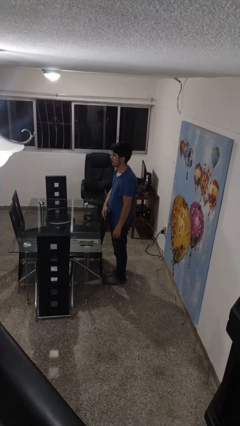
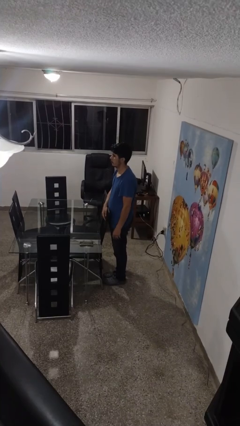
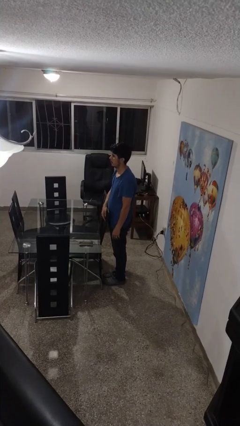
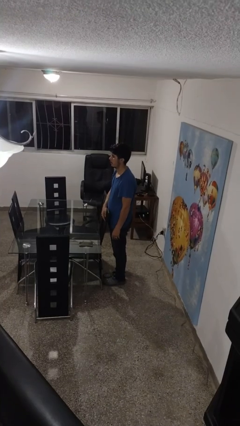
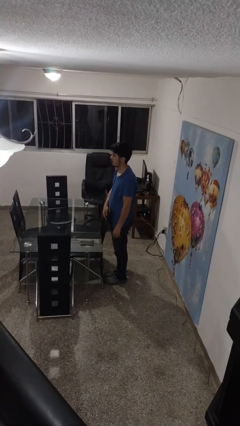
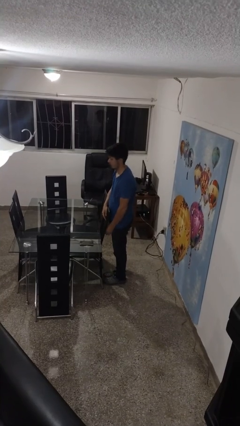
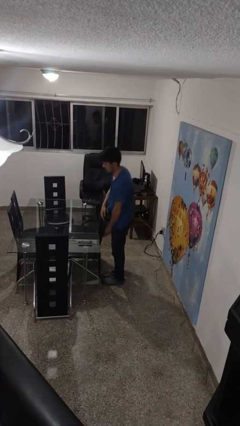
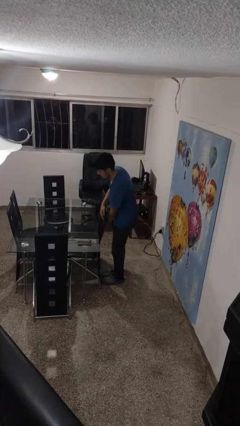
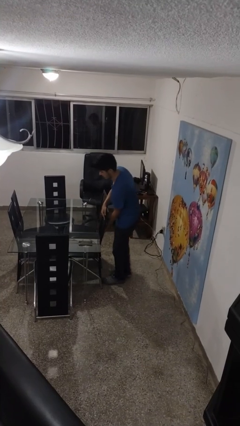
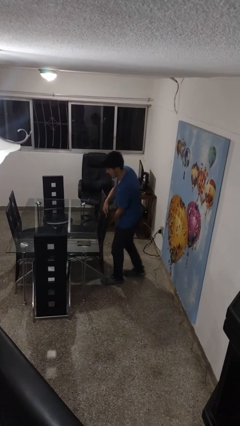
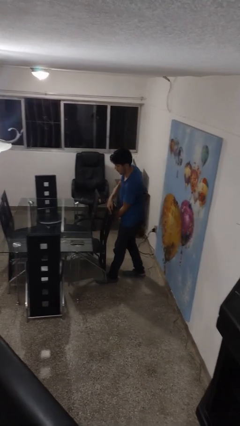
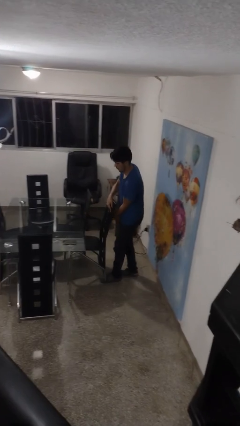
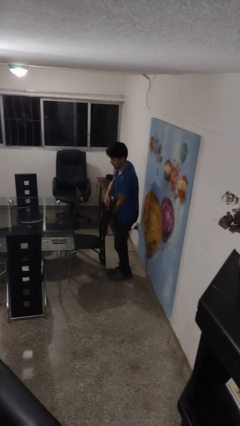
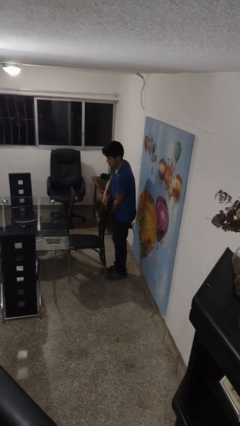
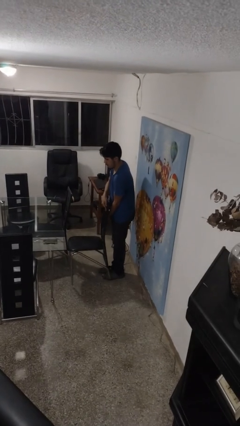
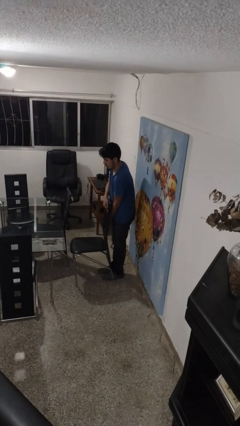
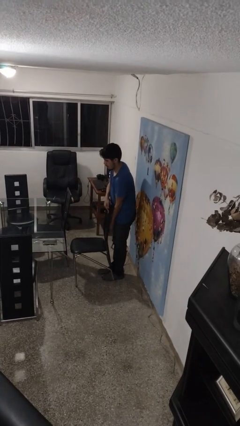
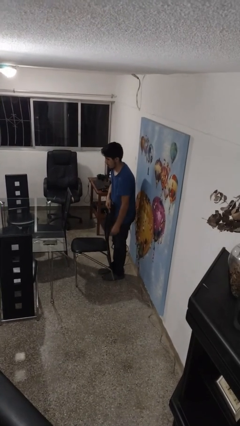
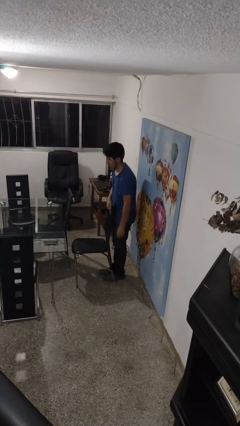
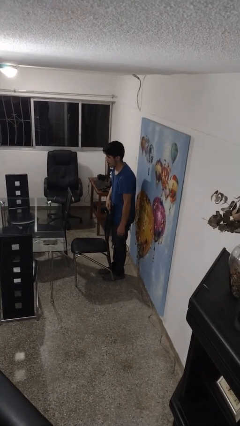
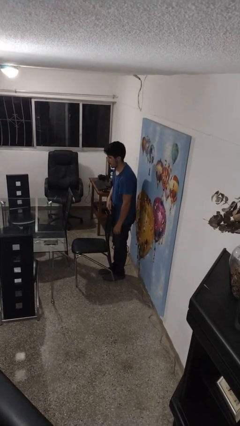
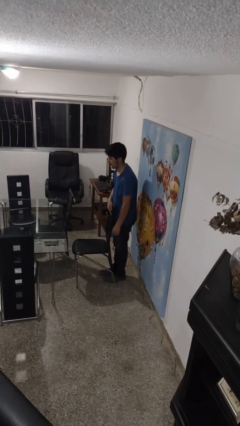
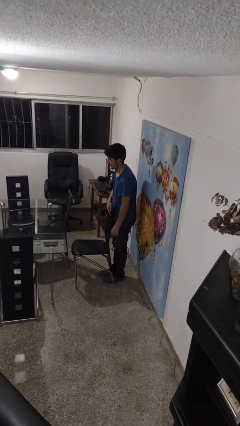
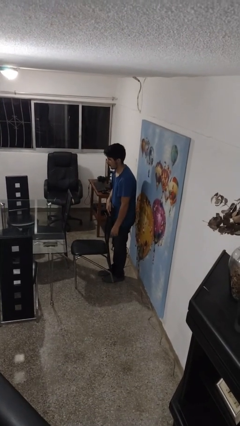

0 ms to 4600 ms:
person pulls out chair

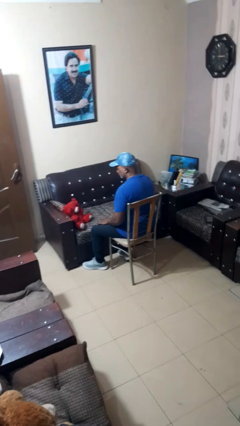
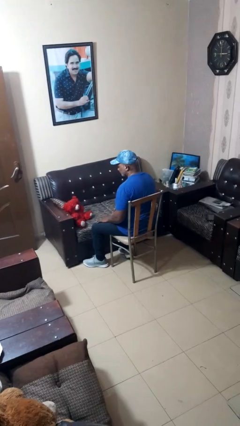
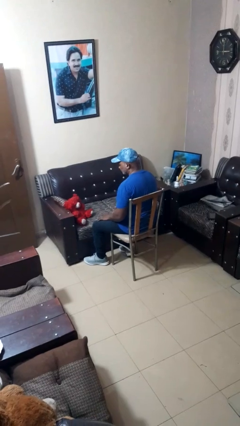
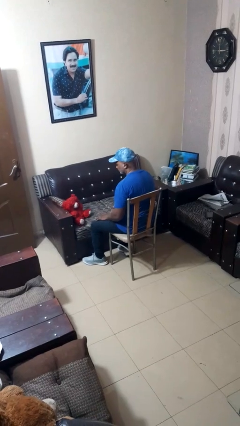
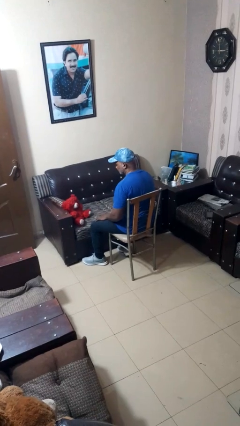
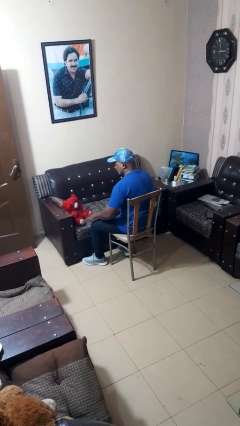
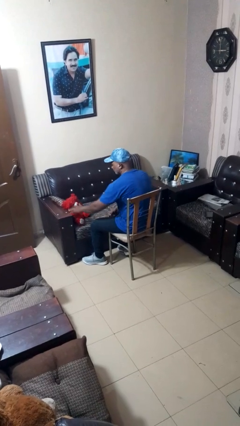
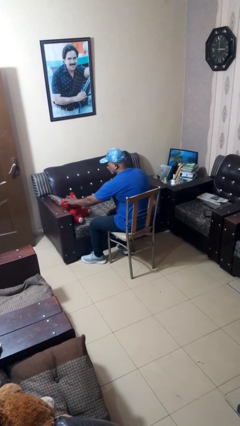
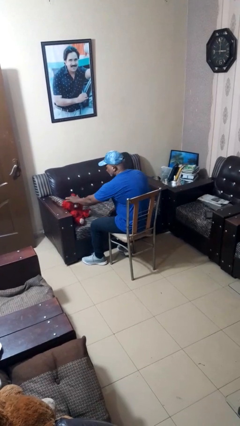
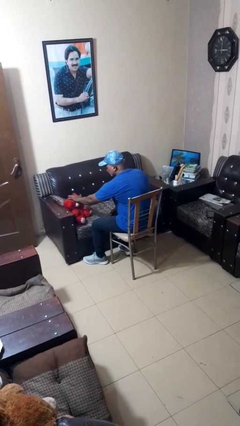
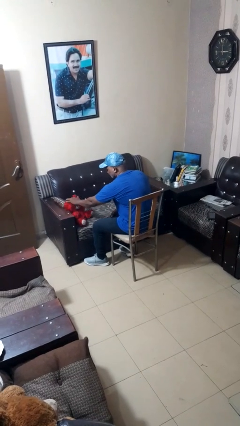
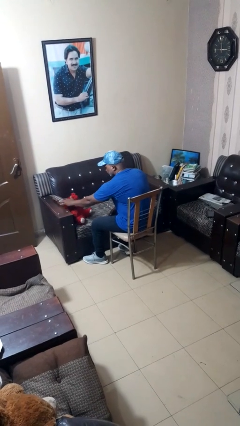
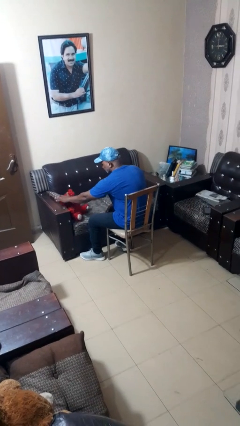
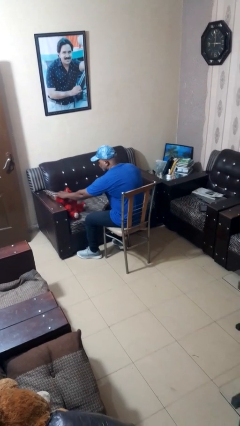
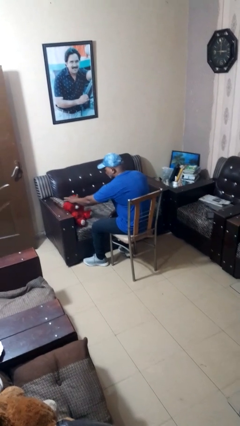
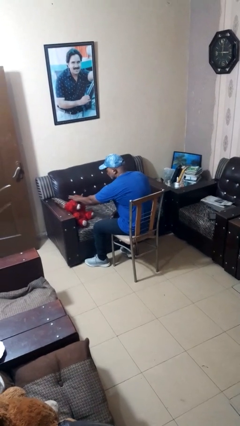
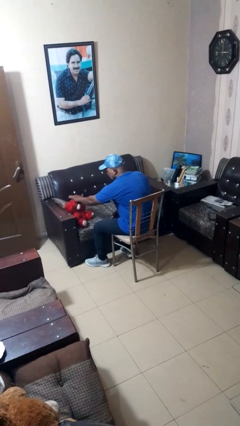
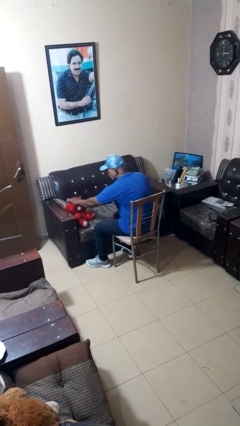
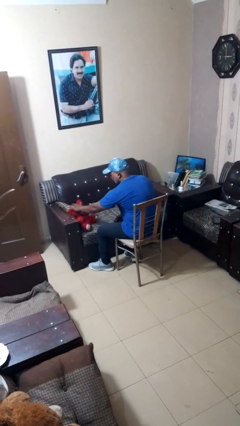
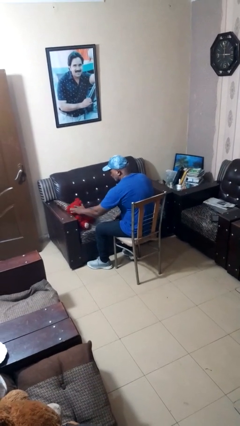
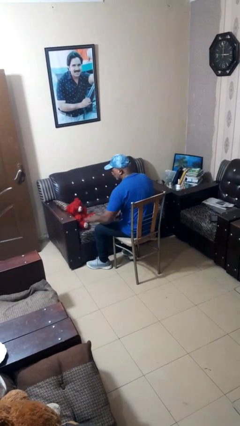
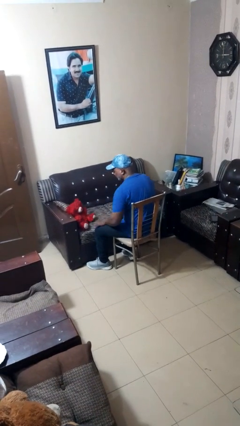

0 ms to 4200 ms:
person waves hand over object

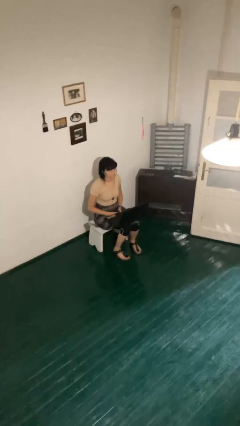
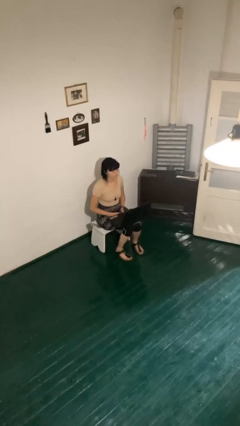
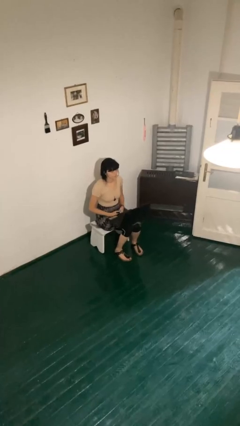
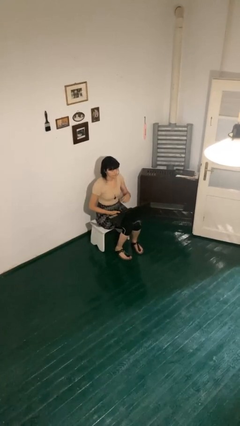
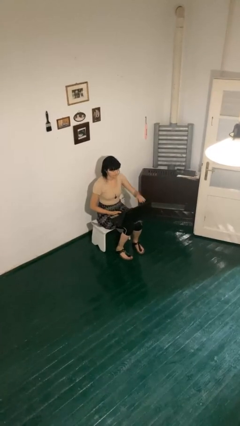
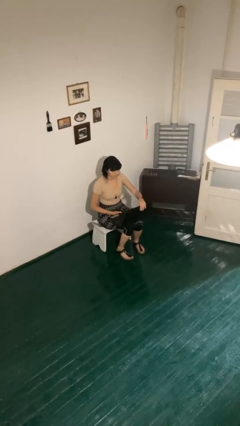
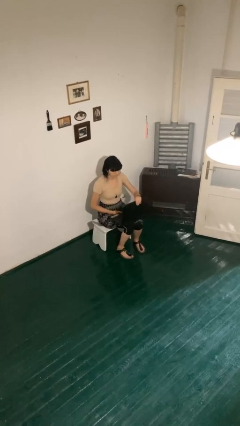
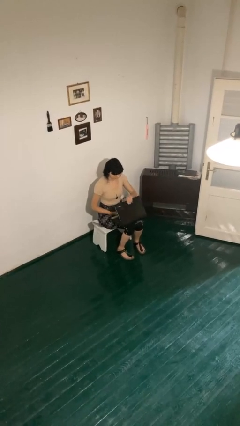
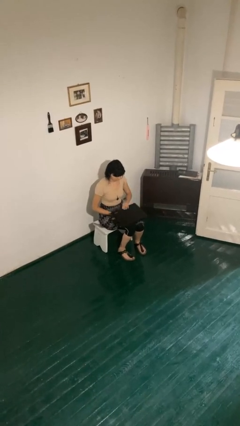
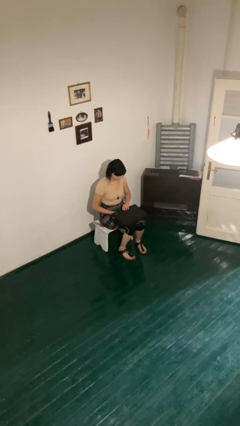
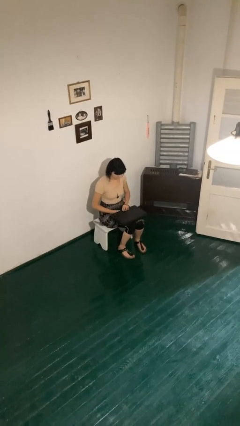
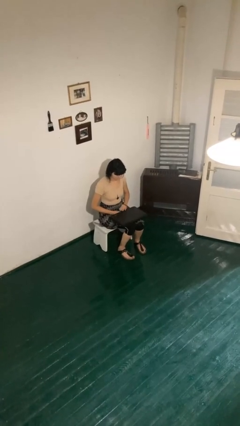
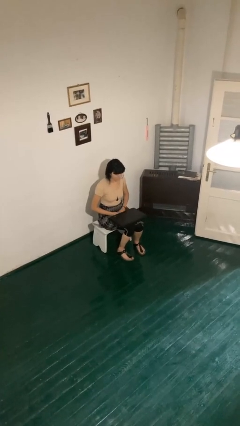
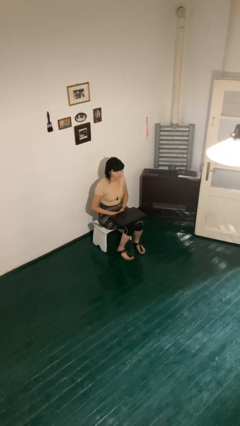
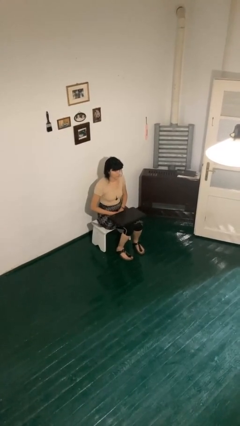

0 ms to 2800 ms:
person closes laptop

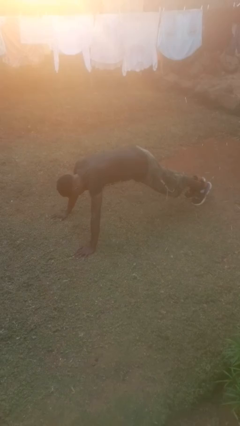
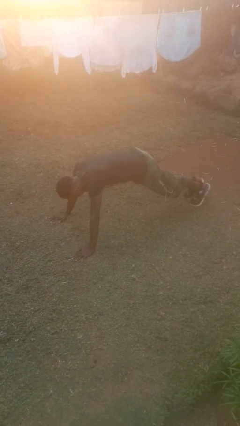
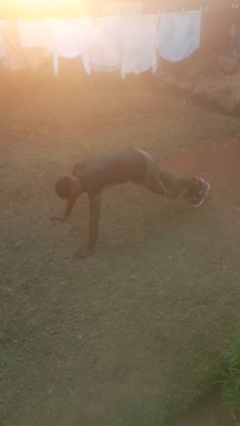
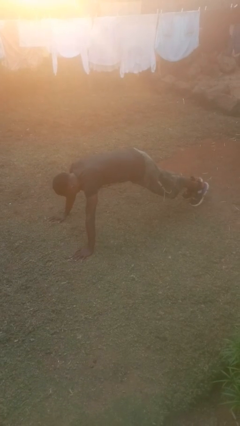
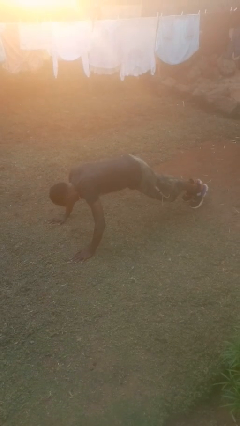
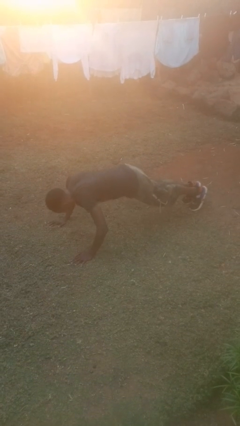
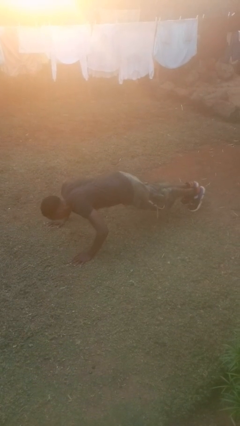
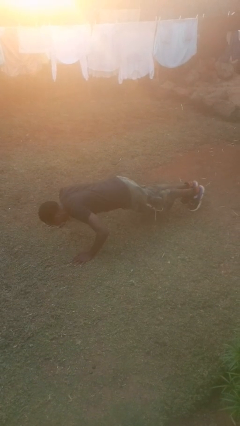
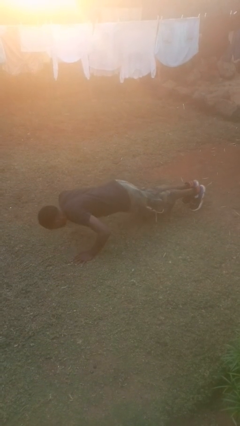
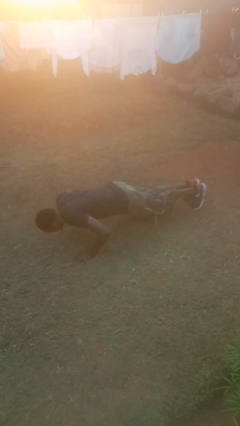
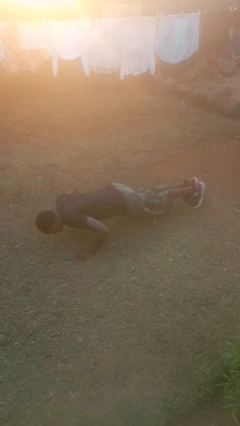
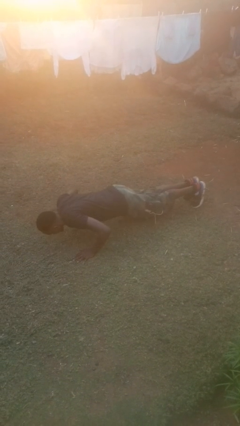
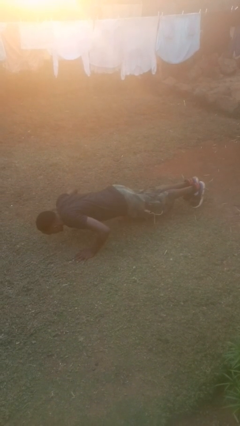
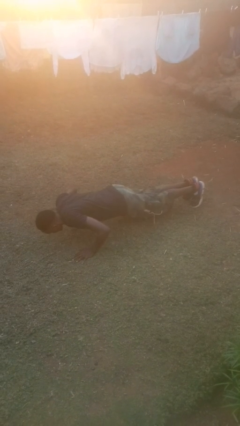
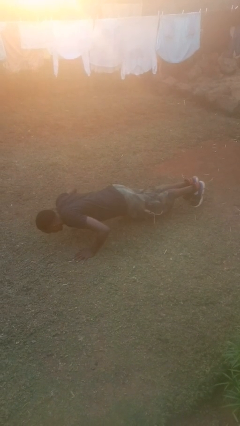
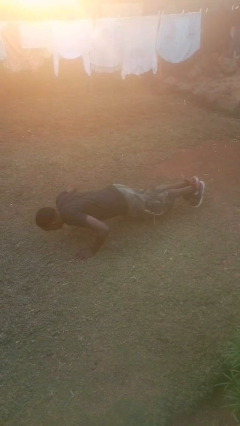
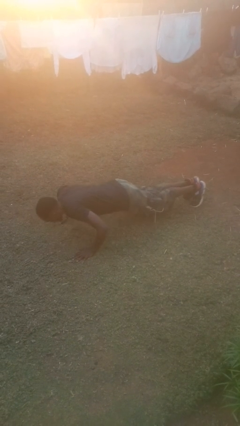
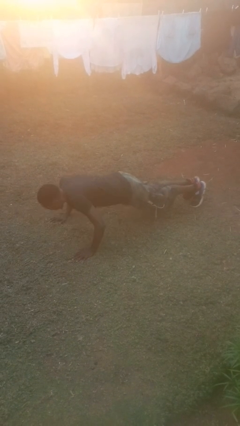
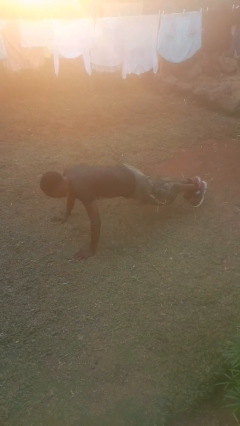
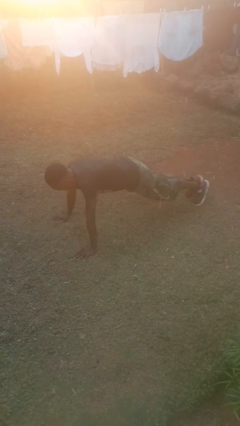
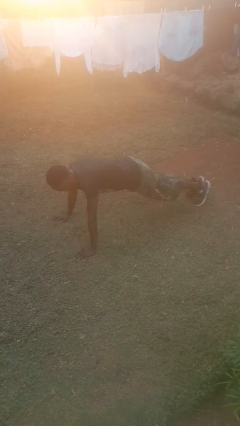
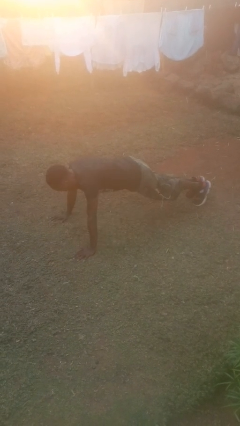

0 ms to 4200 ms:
person exercises with pushup

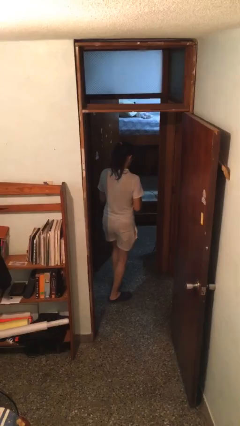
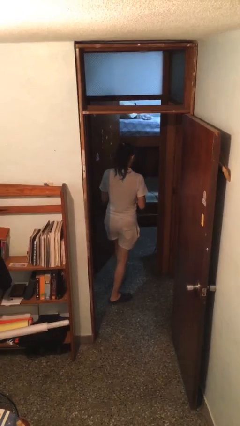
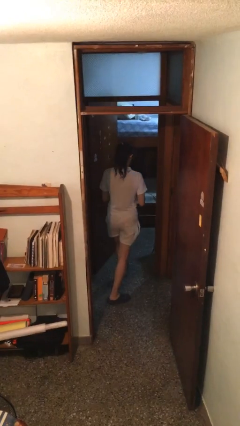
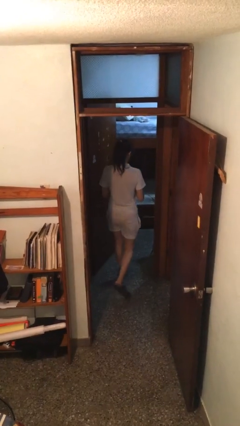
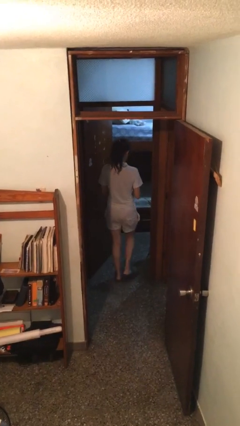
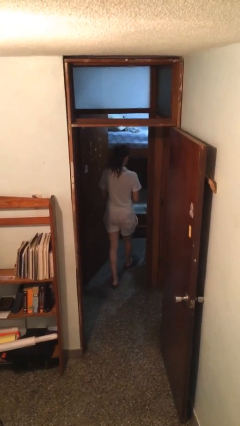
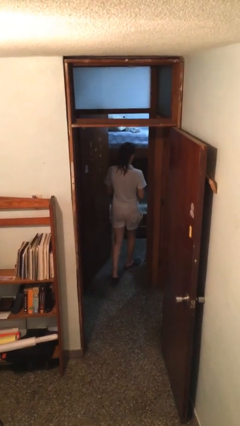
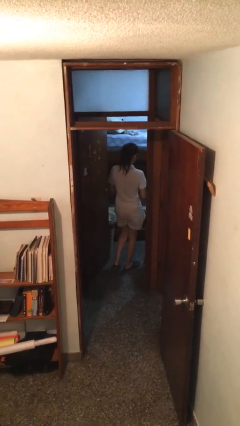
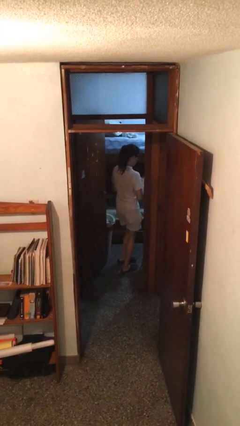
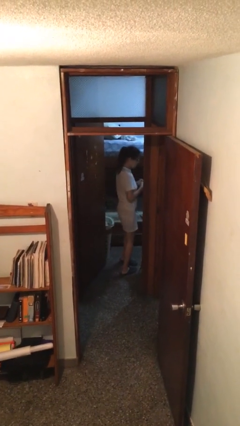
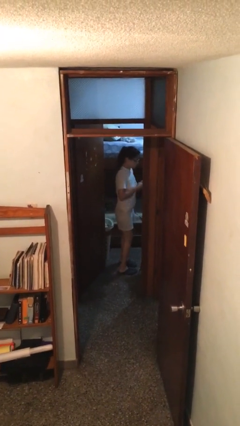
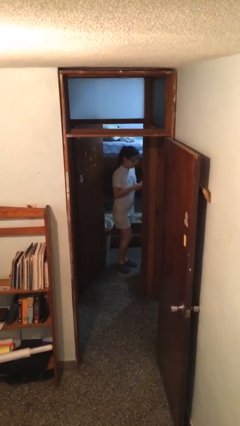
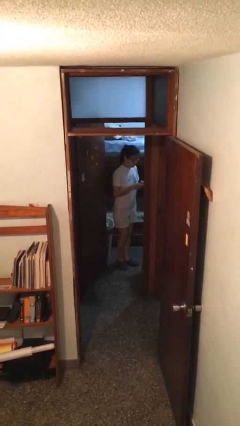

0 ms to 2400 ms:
person exits scene through structure
